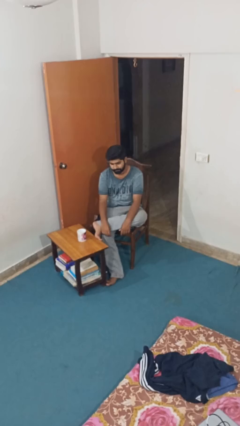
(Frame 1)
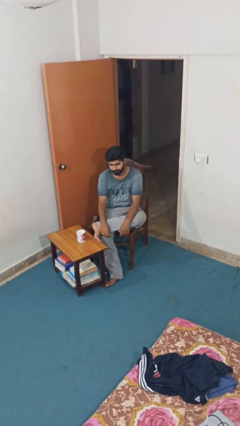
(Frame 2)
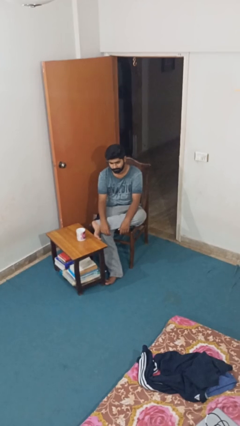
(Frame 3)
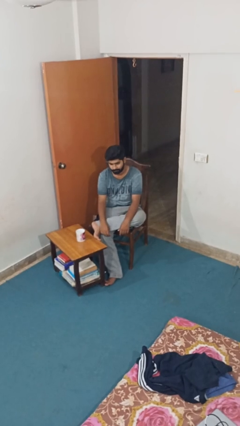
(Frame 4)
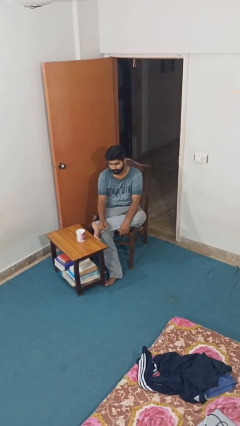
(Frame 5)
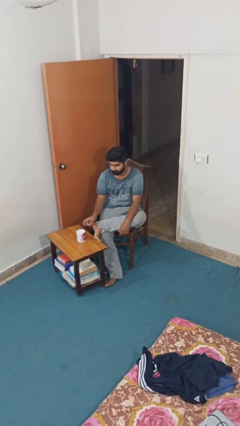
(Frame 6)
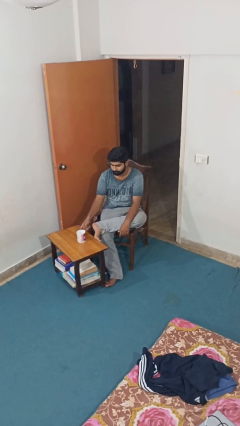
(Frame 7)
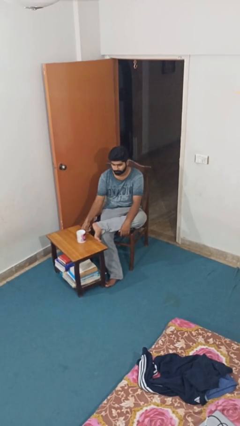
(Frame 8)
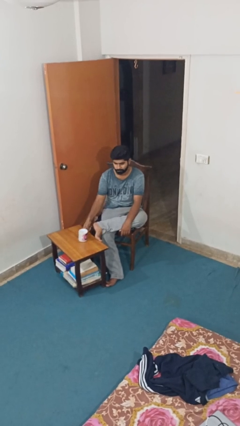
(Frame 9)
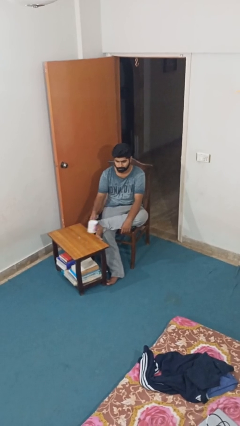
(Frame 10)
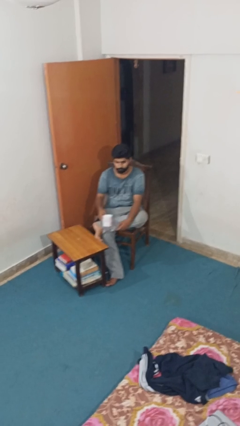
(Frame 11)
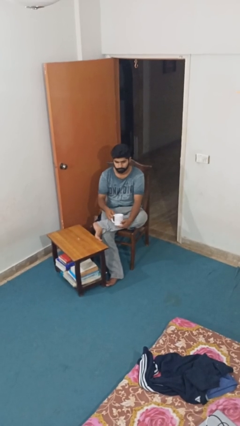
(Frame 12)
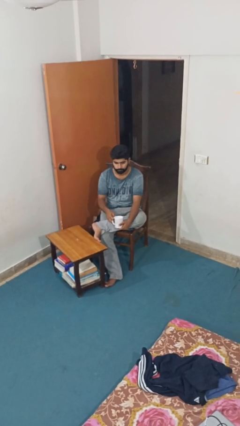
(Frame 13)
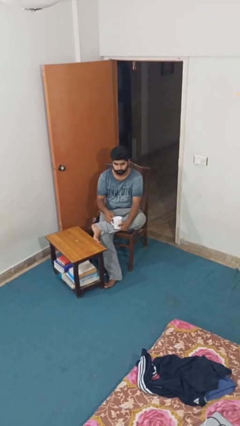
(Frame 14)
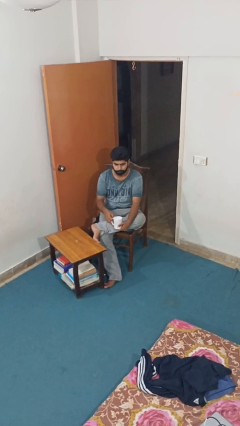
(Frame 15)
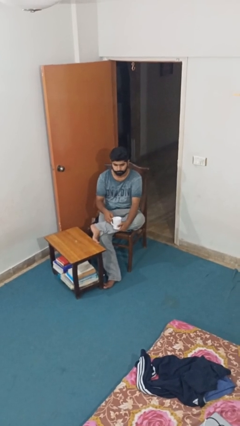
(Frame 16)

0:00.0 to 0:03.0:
person picks up object from table

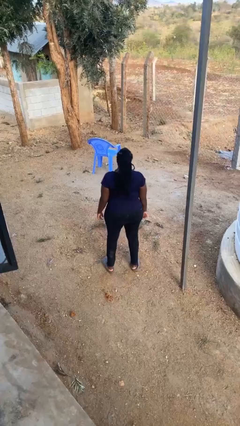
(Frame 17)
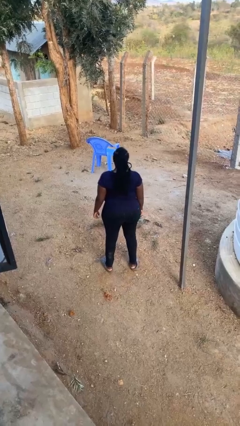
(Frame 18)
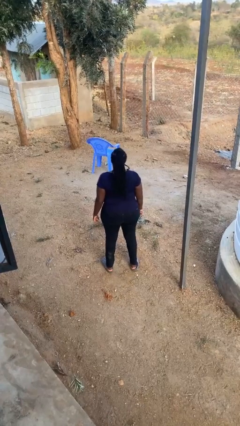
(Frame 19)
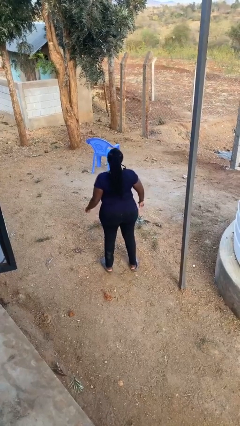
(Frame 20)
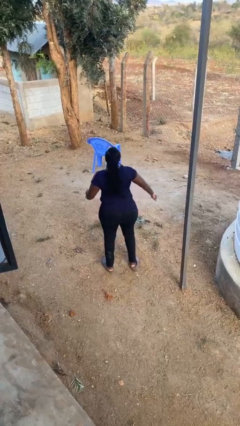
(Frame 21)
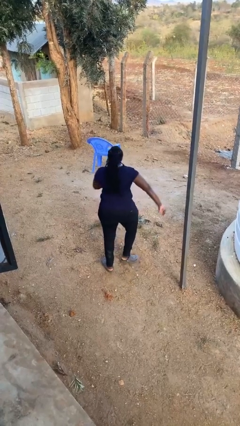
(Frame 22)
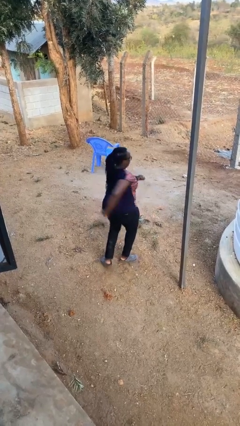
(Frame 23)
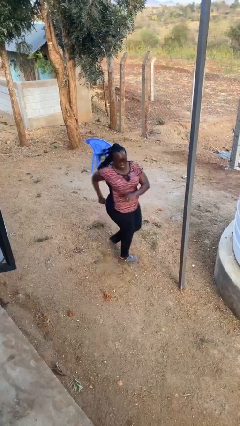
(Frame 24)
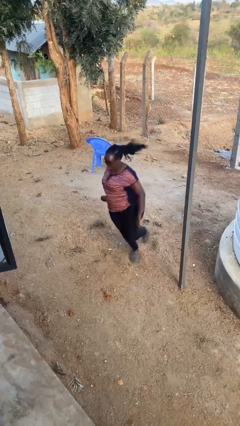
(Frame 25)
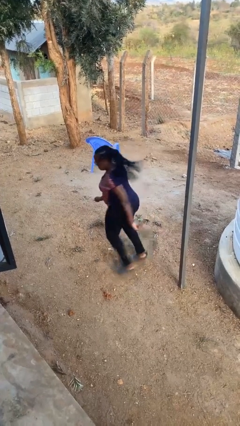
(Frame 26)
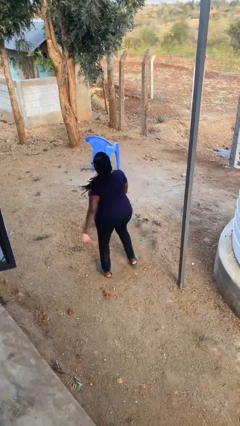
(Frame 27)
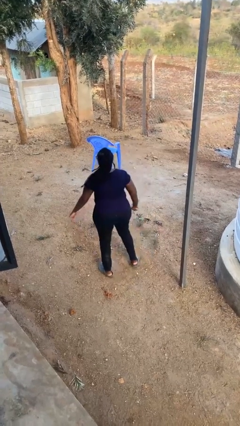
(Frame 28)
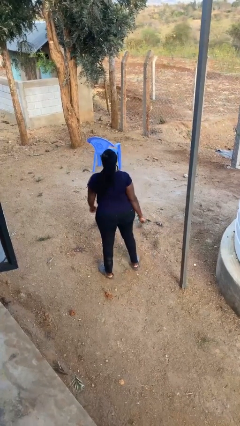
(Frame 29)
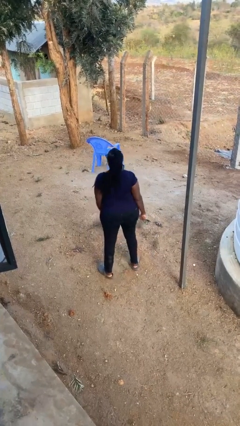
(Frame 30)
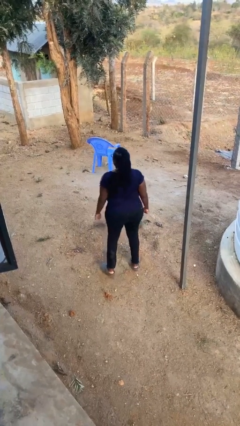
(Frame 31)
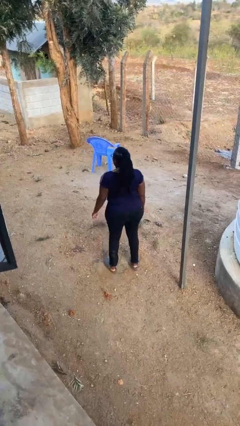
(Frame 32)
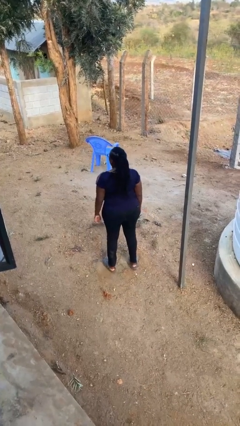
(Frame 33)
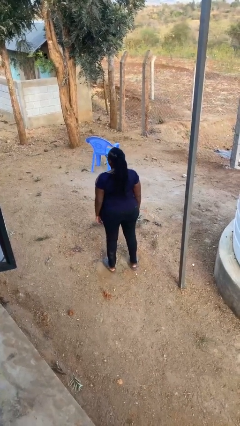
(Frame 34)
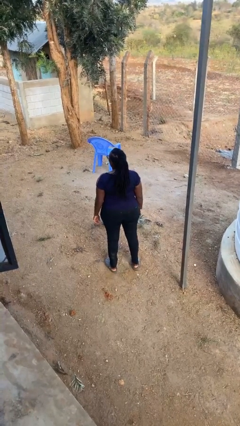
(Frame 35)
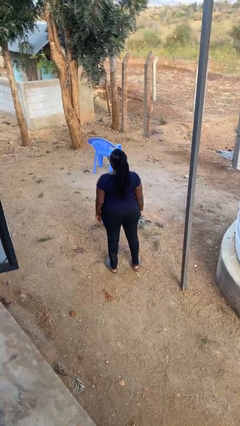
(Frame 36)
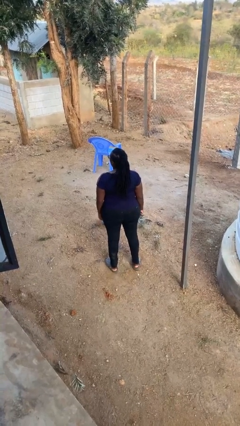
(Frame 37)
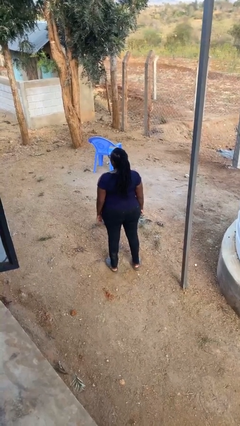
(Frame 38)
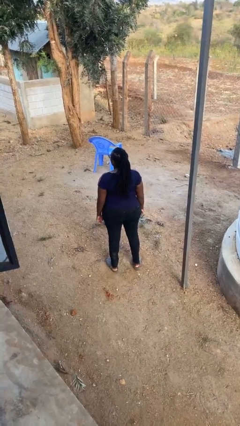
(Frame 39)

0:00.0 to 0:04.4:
person twirls

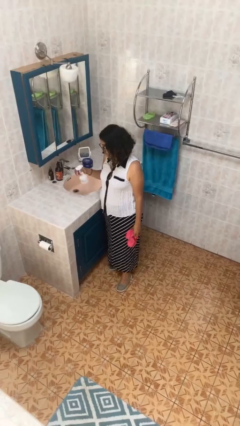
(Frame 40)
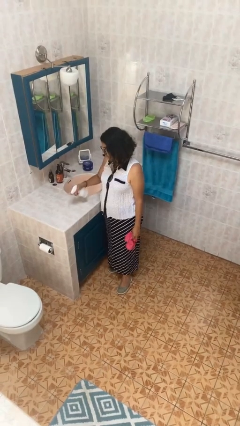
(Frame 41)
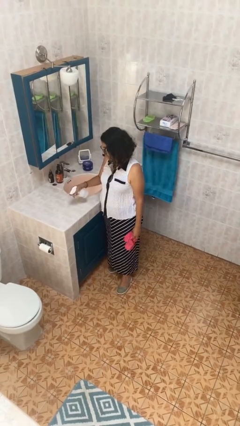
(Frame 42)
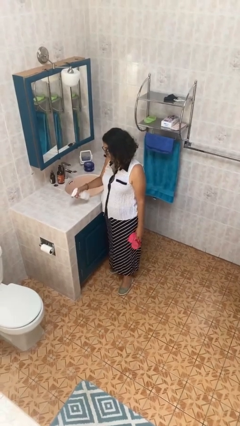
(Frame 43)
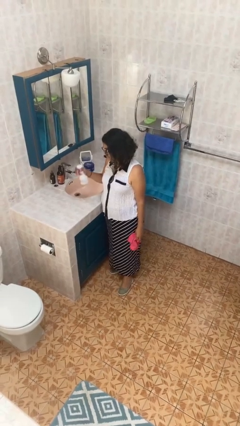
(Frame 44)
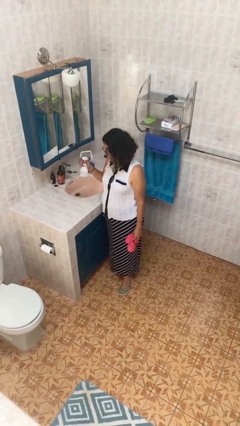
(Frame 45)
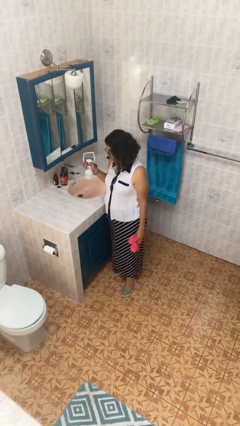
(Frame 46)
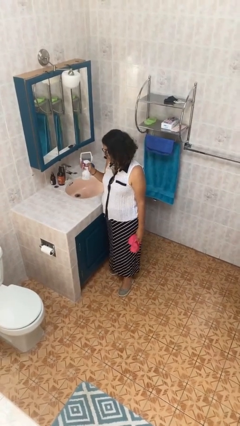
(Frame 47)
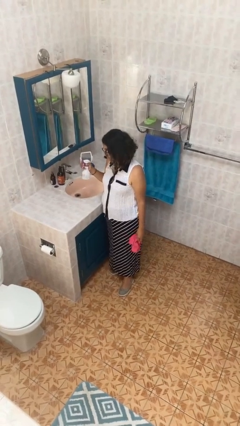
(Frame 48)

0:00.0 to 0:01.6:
person sprays from bottle

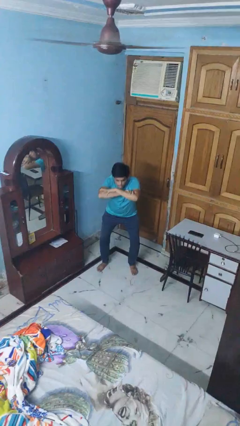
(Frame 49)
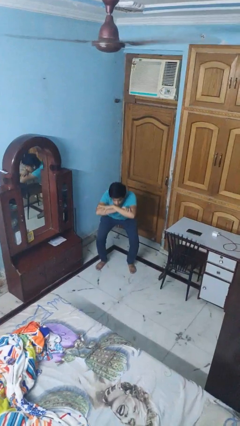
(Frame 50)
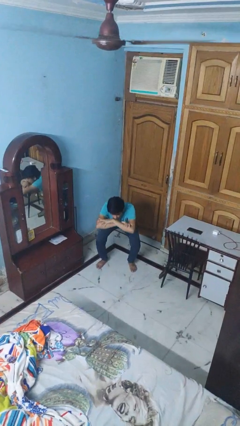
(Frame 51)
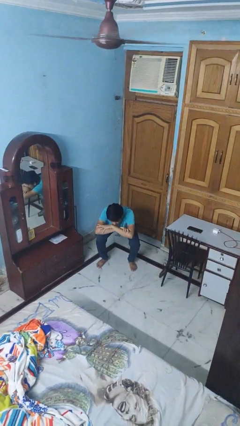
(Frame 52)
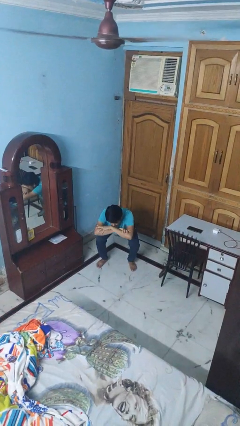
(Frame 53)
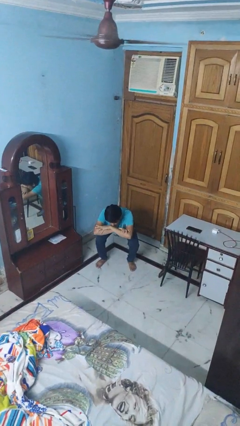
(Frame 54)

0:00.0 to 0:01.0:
person squats

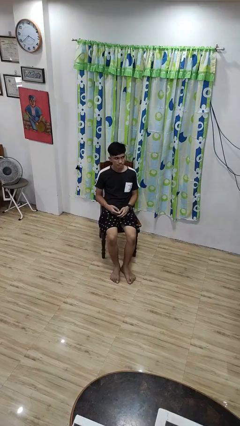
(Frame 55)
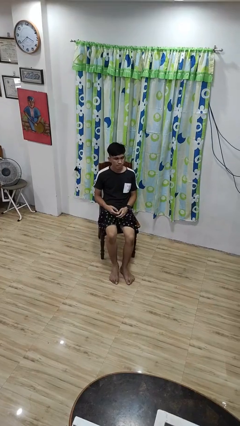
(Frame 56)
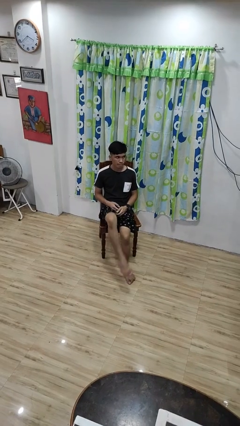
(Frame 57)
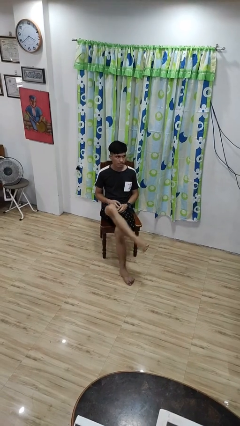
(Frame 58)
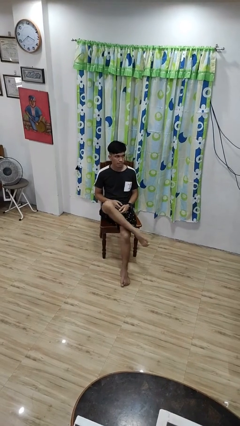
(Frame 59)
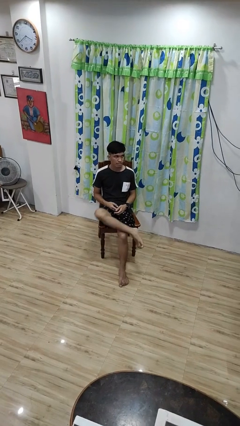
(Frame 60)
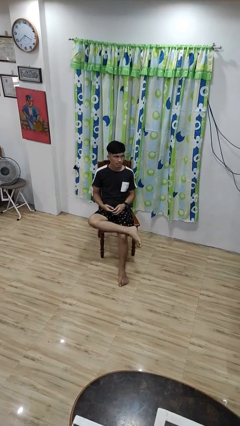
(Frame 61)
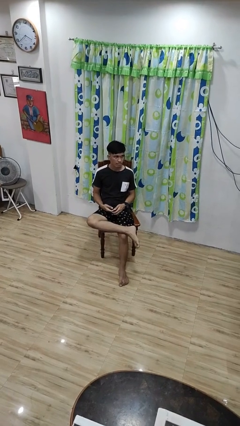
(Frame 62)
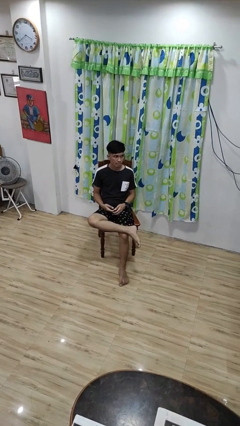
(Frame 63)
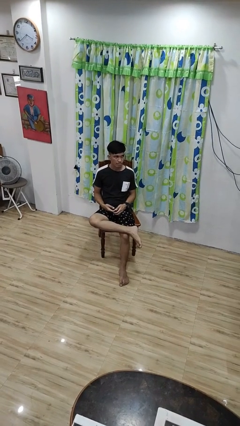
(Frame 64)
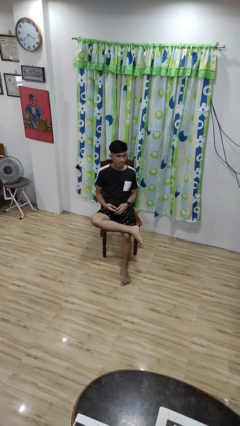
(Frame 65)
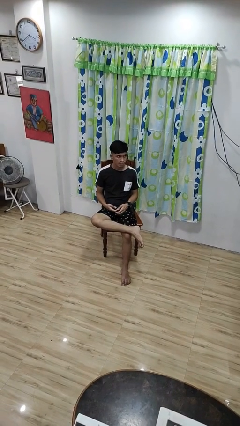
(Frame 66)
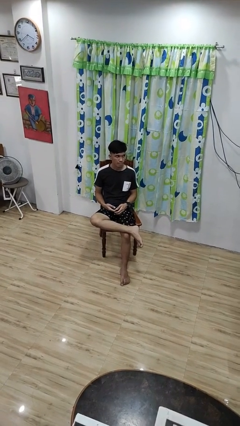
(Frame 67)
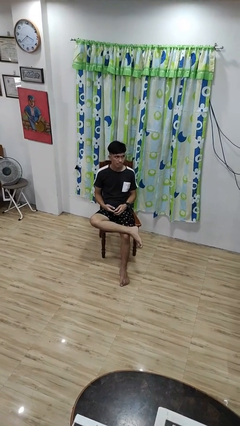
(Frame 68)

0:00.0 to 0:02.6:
person crosses legs

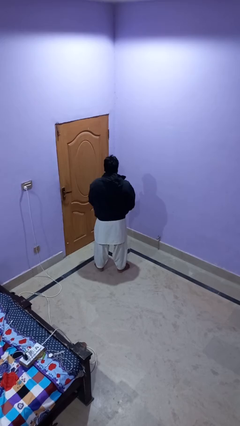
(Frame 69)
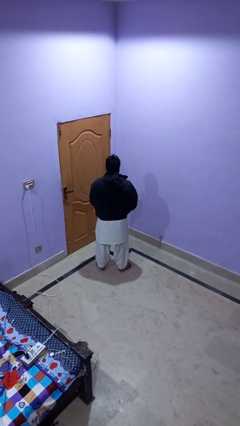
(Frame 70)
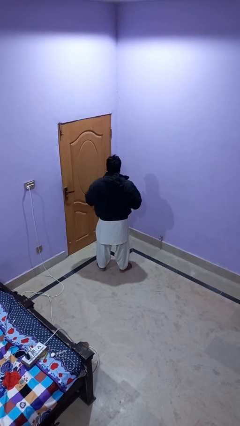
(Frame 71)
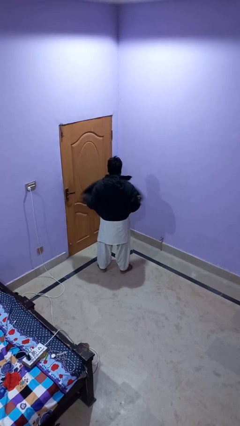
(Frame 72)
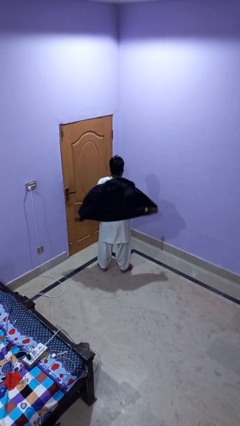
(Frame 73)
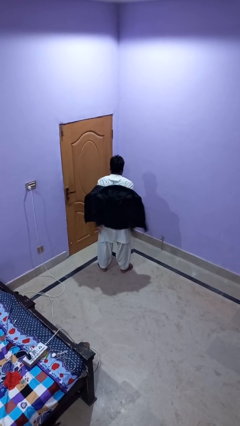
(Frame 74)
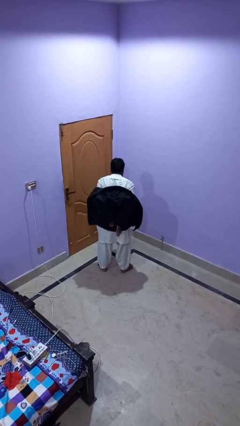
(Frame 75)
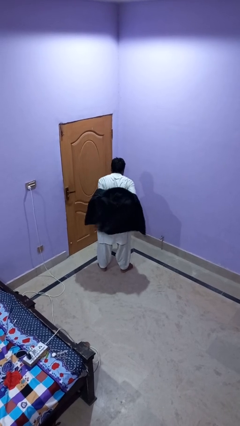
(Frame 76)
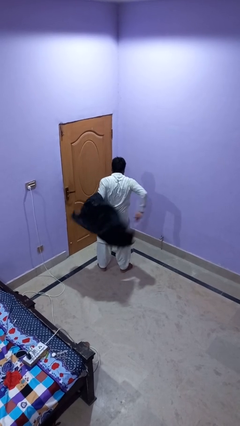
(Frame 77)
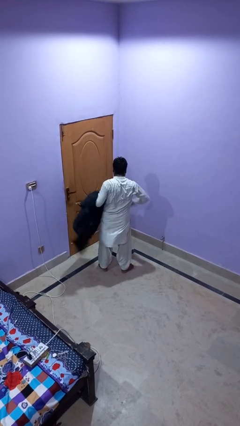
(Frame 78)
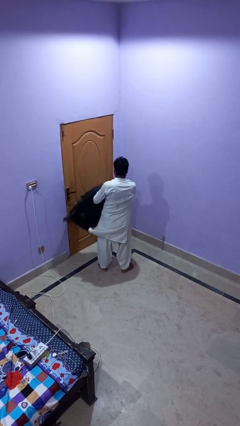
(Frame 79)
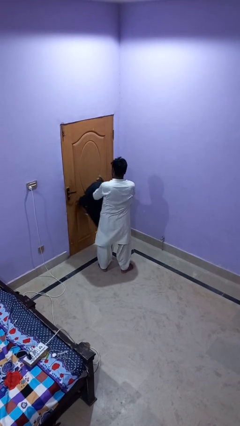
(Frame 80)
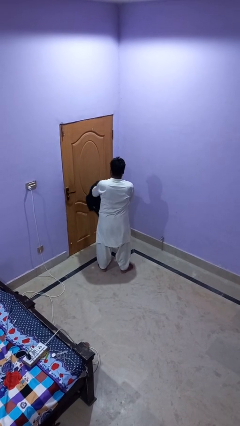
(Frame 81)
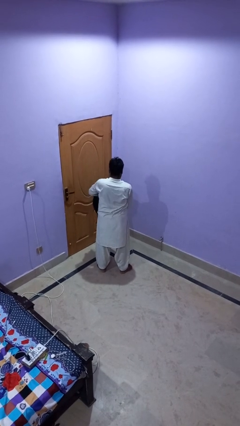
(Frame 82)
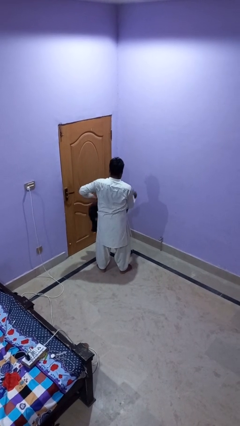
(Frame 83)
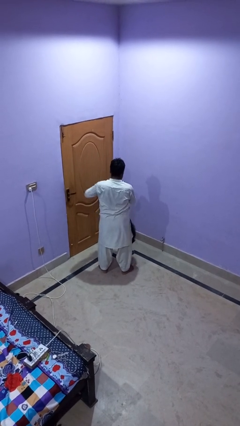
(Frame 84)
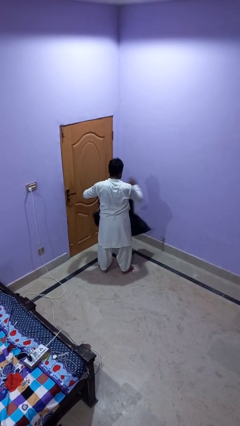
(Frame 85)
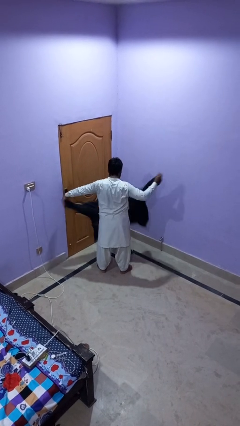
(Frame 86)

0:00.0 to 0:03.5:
person takes off jacket

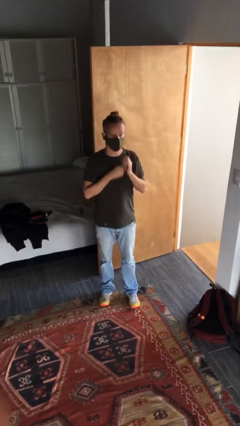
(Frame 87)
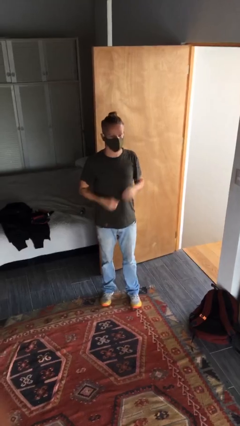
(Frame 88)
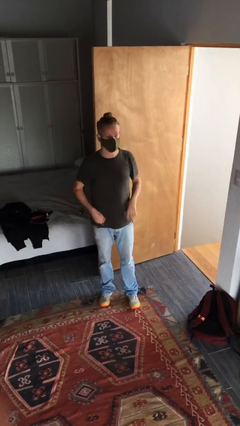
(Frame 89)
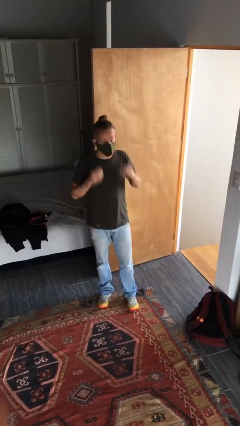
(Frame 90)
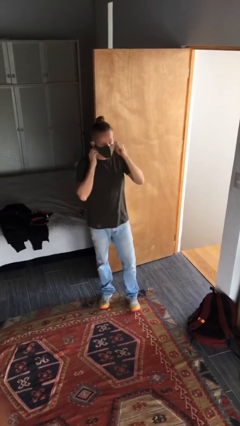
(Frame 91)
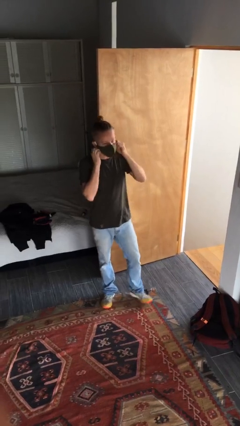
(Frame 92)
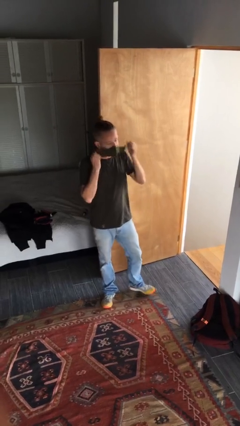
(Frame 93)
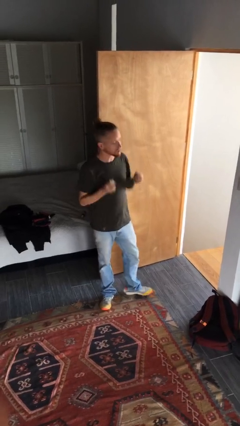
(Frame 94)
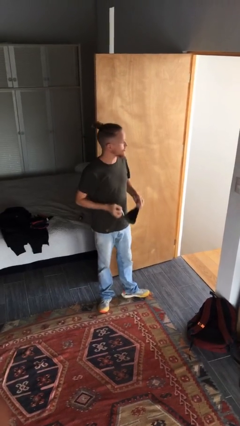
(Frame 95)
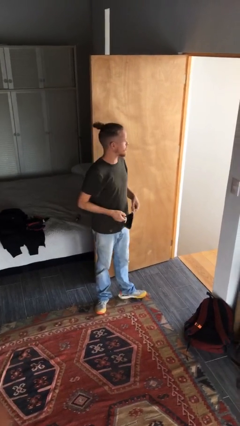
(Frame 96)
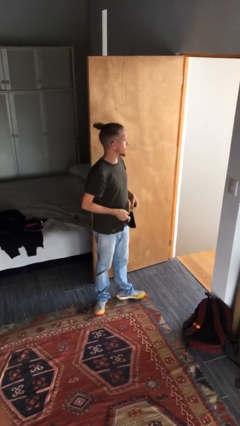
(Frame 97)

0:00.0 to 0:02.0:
person takes off facemask
